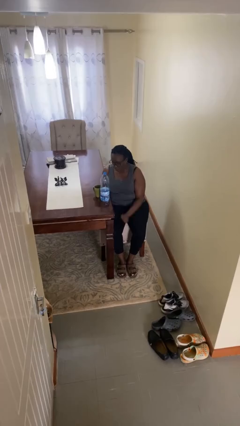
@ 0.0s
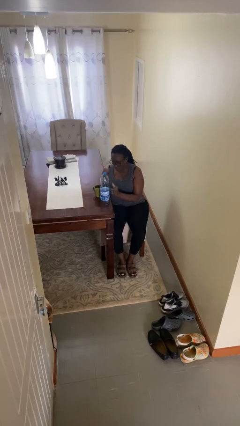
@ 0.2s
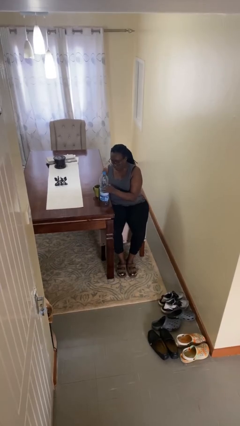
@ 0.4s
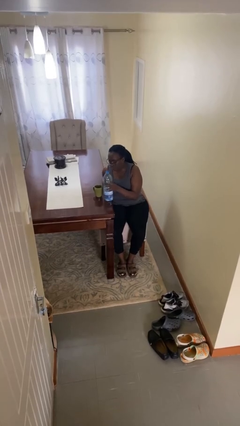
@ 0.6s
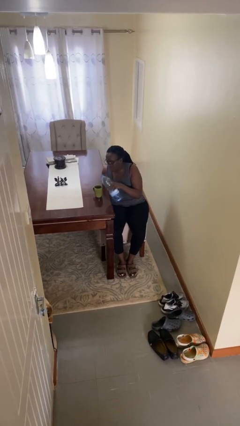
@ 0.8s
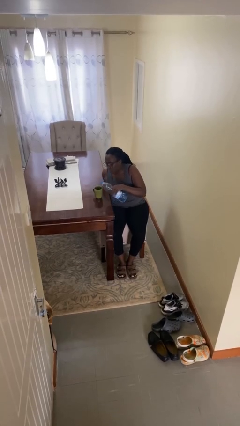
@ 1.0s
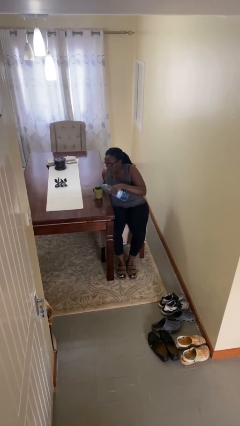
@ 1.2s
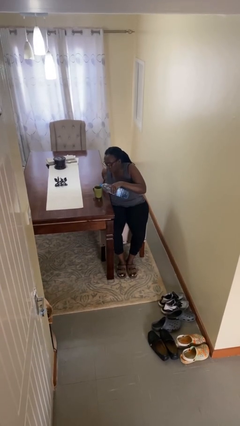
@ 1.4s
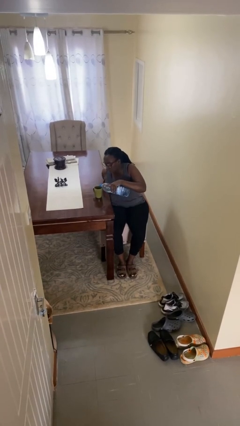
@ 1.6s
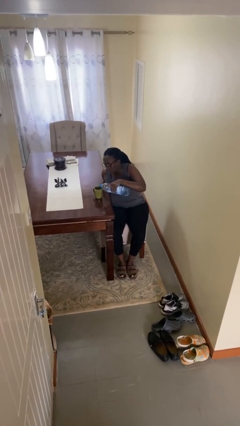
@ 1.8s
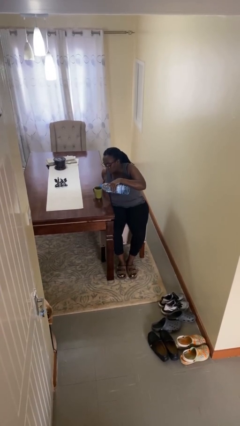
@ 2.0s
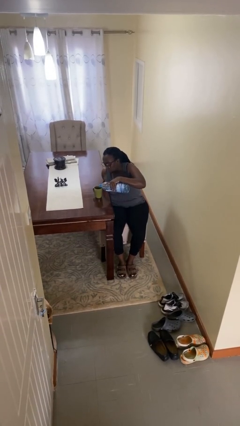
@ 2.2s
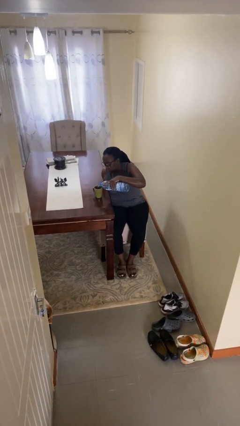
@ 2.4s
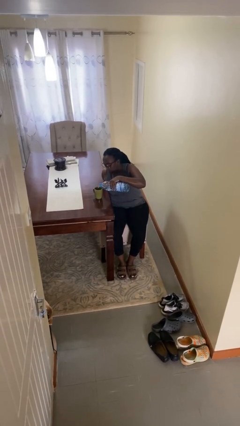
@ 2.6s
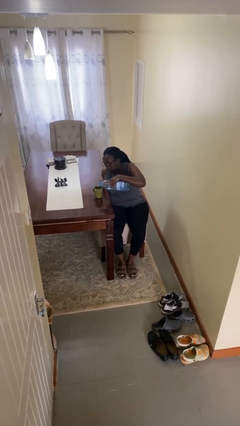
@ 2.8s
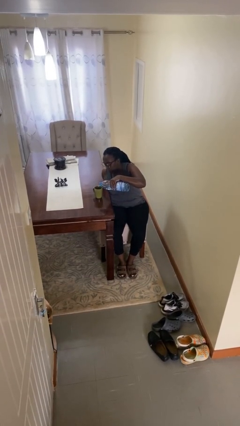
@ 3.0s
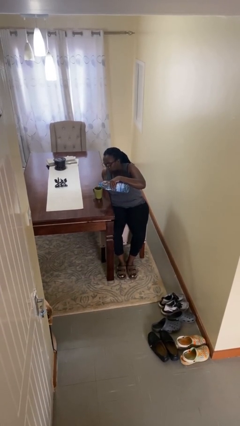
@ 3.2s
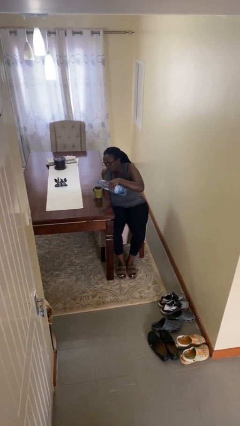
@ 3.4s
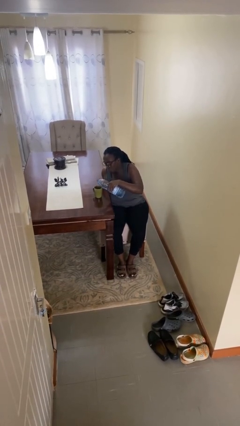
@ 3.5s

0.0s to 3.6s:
person pours liquid into cup

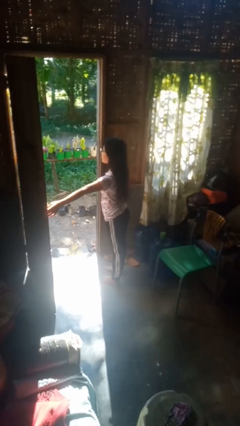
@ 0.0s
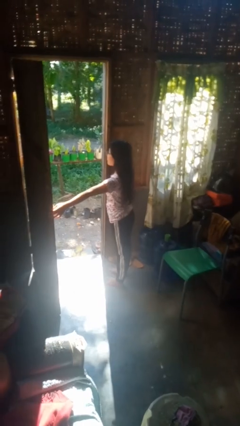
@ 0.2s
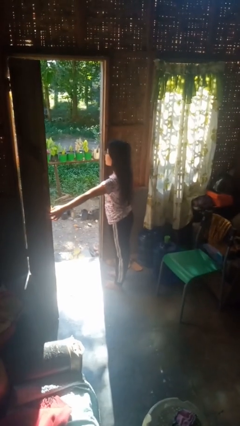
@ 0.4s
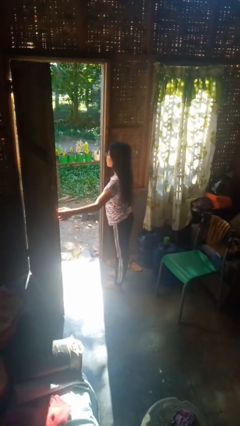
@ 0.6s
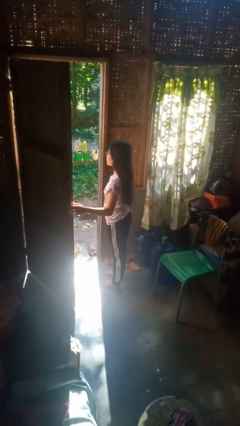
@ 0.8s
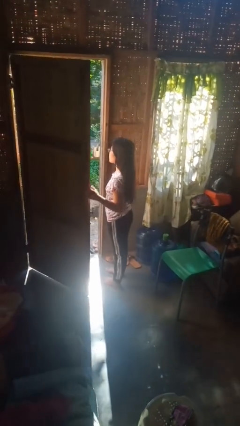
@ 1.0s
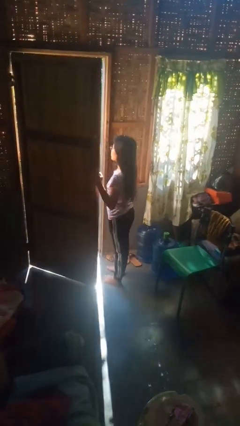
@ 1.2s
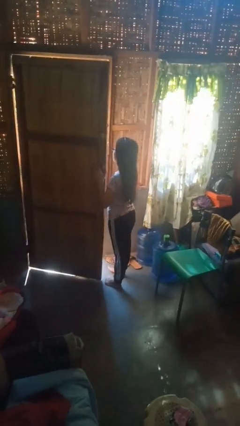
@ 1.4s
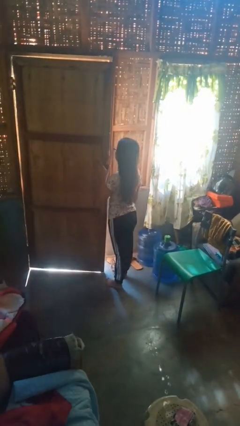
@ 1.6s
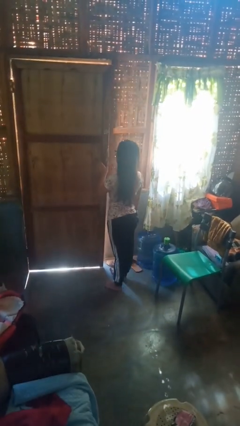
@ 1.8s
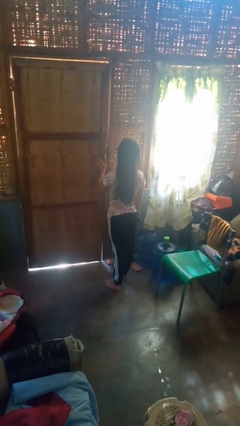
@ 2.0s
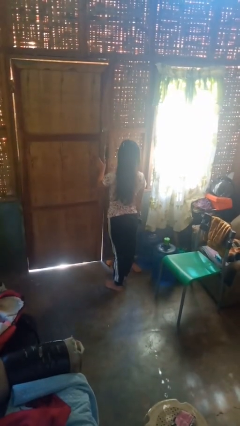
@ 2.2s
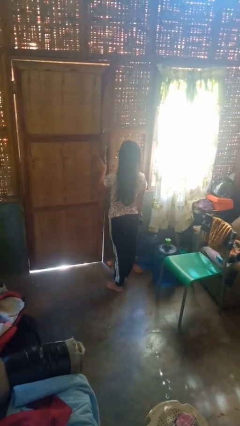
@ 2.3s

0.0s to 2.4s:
person closes facility door

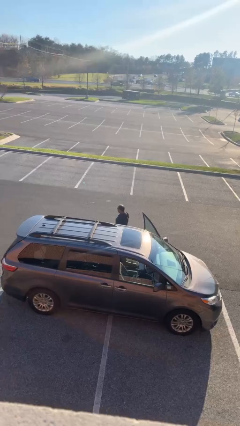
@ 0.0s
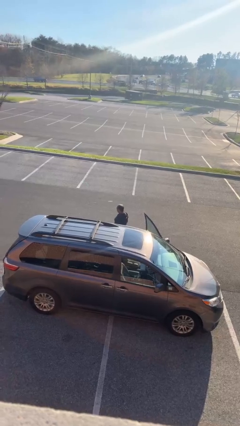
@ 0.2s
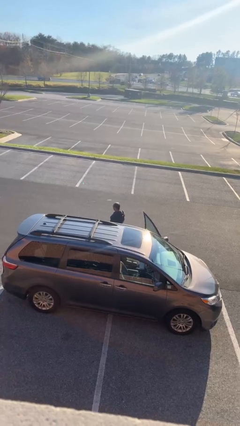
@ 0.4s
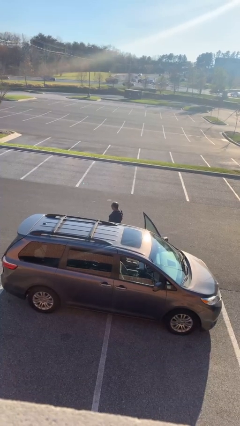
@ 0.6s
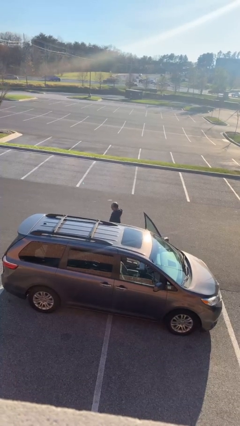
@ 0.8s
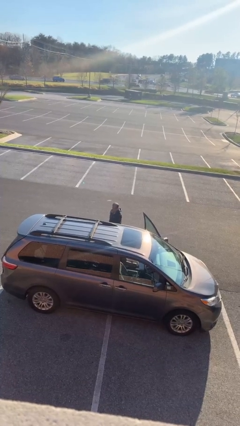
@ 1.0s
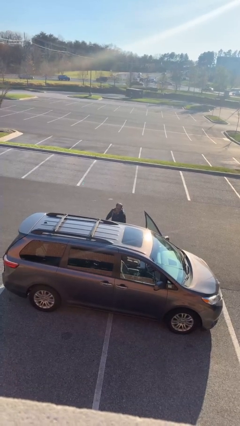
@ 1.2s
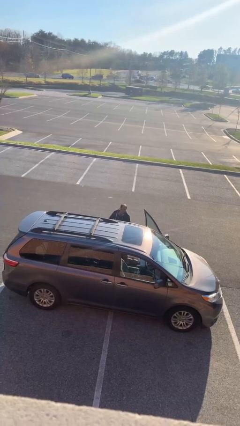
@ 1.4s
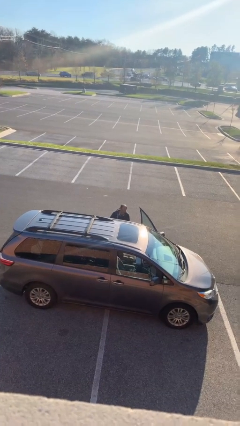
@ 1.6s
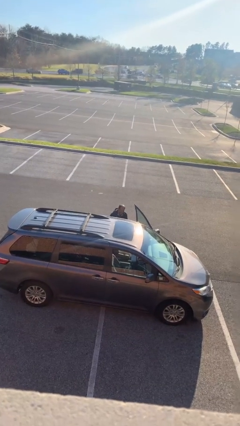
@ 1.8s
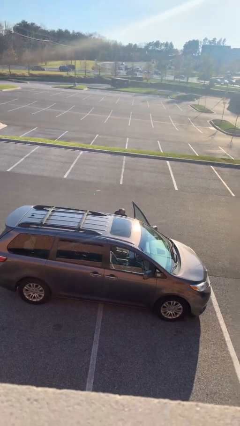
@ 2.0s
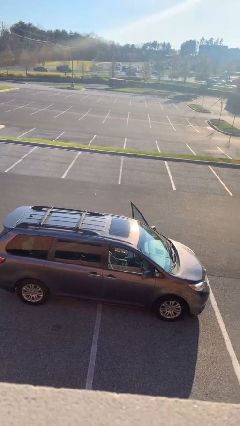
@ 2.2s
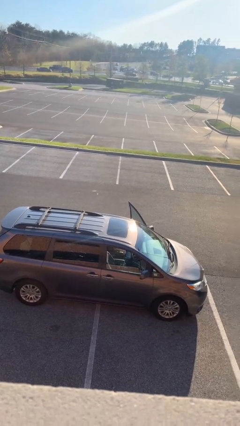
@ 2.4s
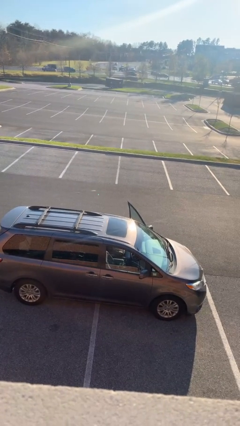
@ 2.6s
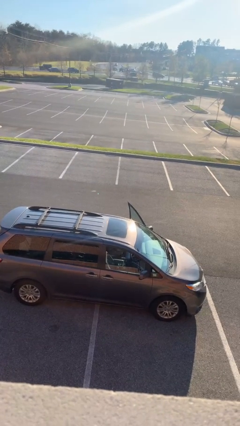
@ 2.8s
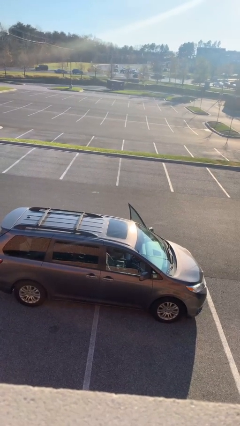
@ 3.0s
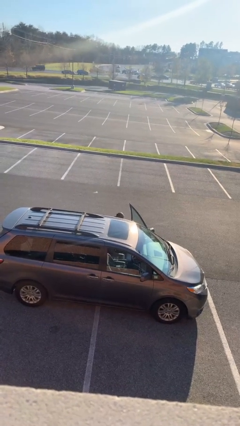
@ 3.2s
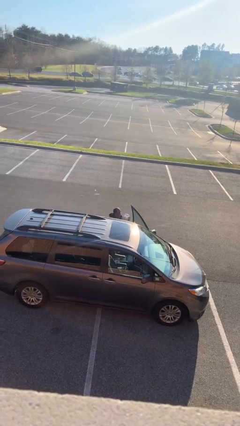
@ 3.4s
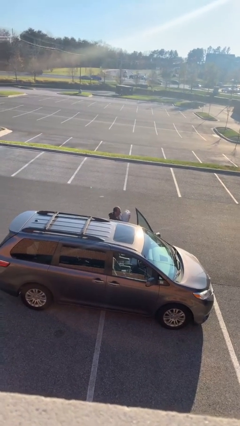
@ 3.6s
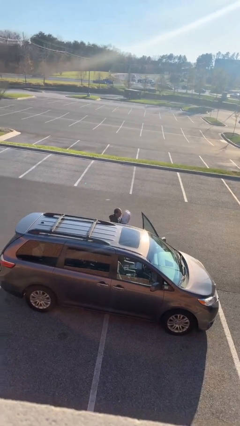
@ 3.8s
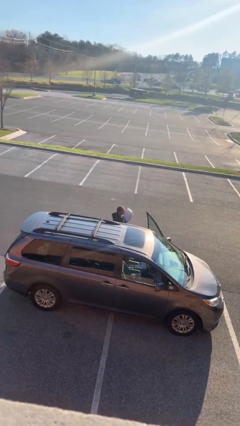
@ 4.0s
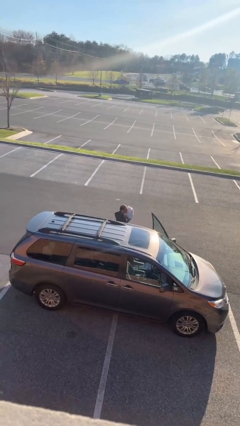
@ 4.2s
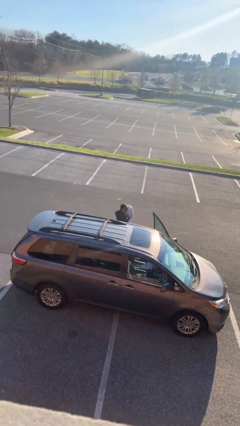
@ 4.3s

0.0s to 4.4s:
person unloads car

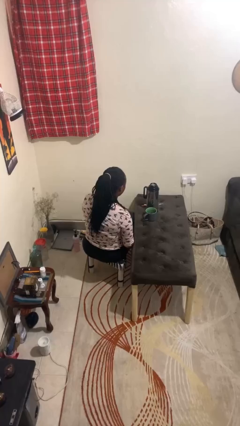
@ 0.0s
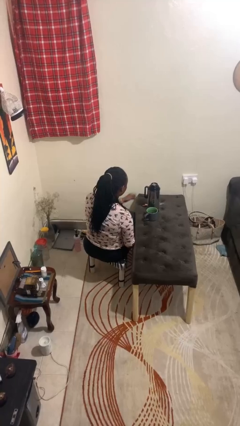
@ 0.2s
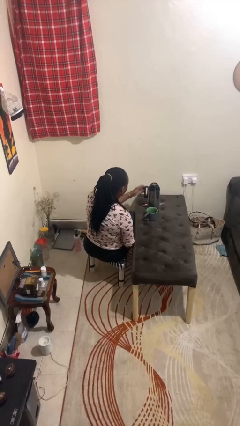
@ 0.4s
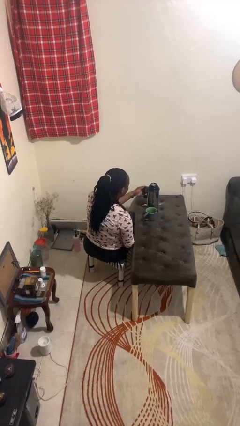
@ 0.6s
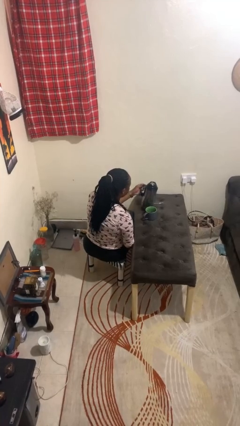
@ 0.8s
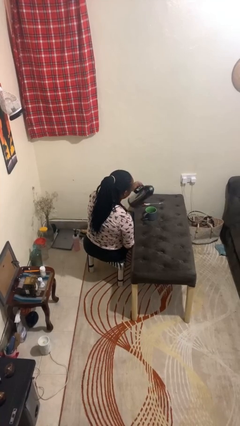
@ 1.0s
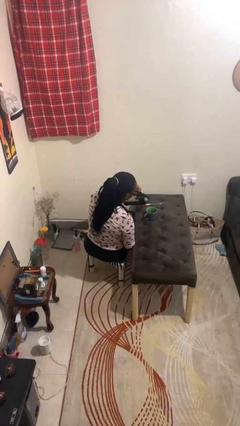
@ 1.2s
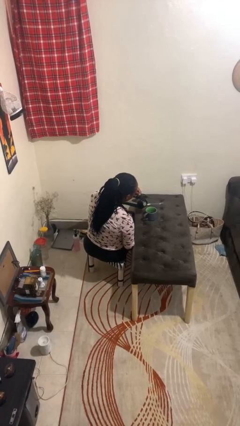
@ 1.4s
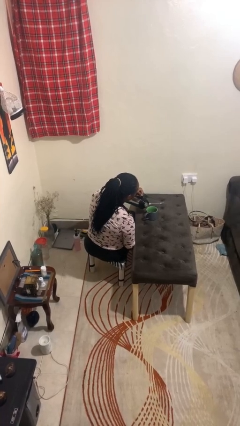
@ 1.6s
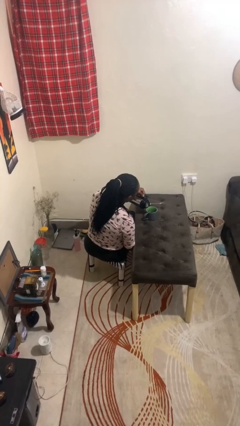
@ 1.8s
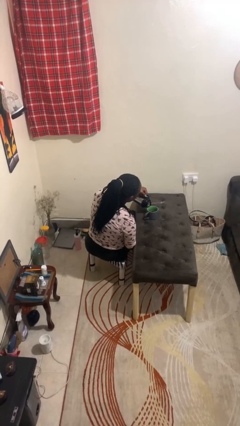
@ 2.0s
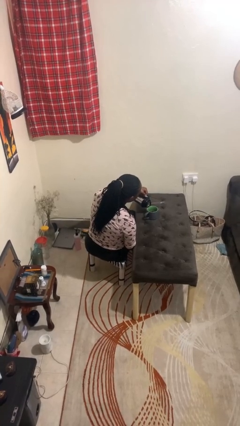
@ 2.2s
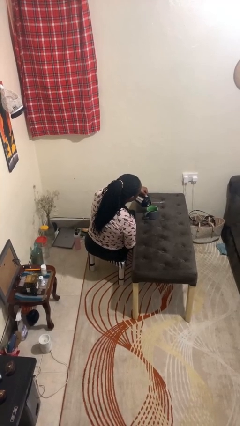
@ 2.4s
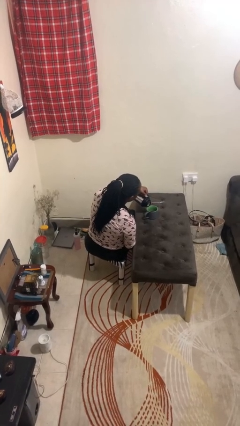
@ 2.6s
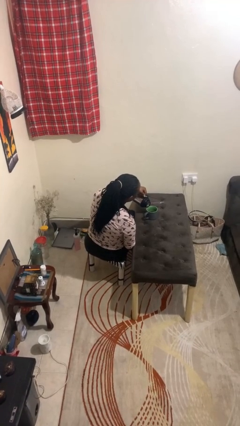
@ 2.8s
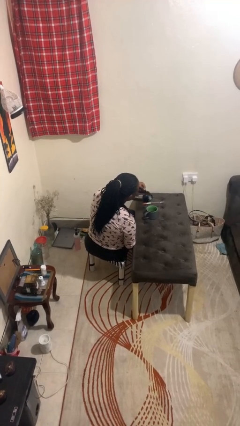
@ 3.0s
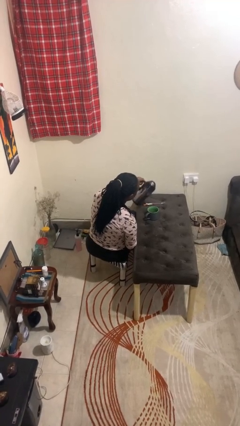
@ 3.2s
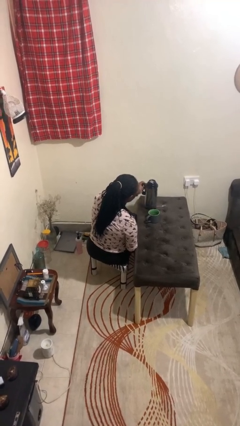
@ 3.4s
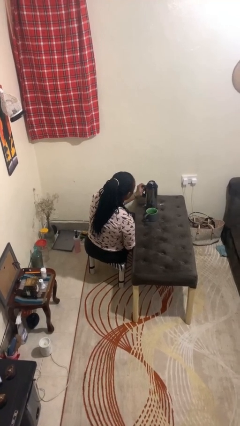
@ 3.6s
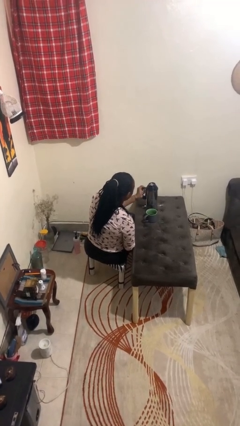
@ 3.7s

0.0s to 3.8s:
person pours coffee into mug

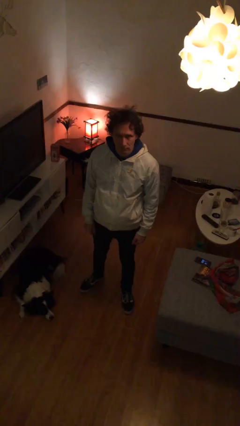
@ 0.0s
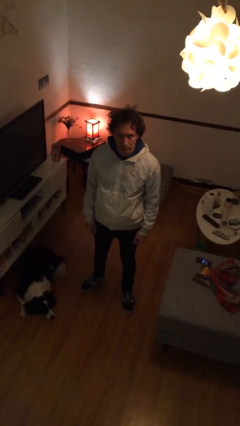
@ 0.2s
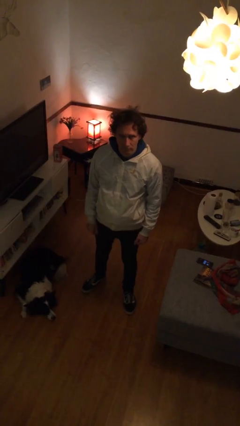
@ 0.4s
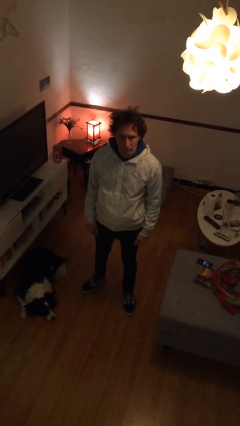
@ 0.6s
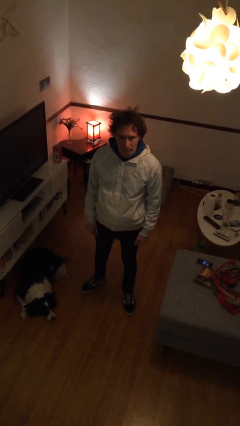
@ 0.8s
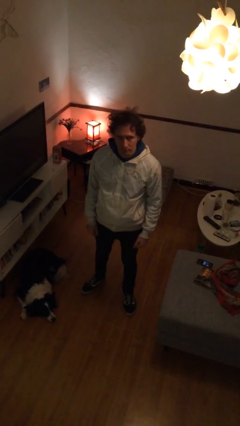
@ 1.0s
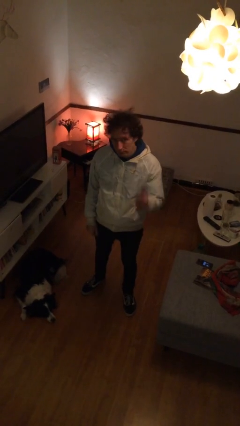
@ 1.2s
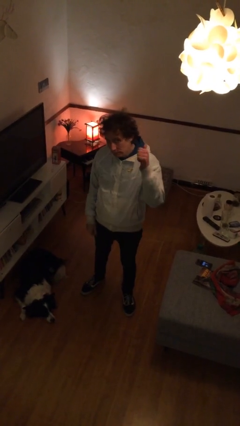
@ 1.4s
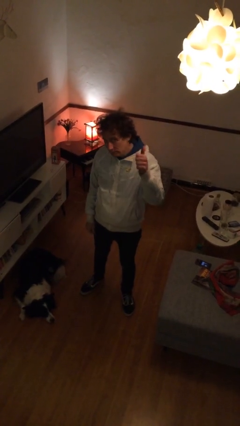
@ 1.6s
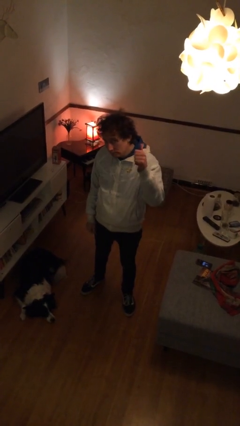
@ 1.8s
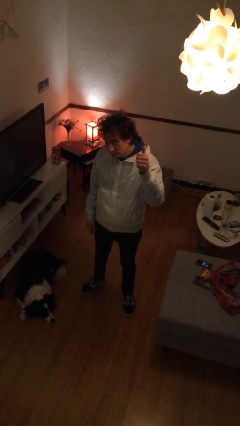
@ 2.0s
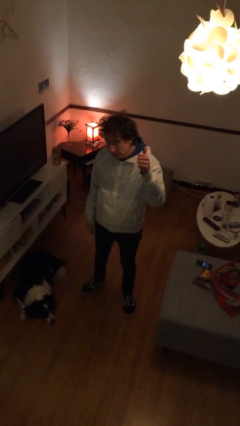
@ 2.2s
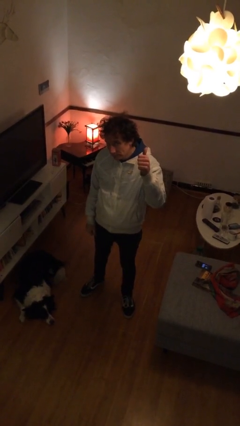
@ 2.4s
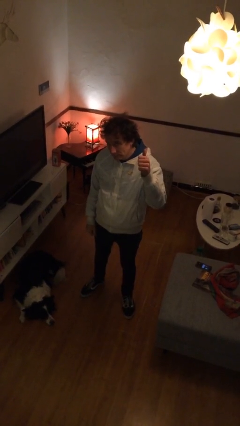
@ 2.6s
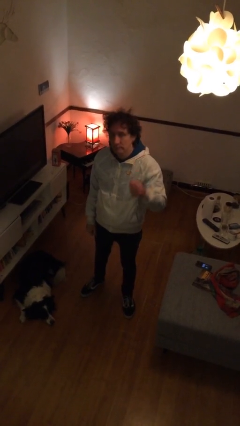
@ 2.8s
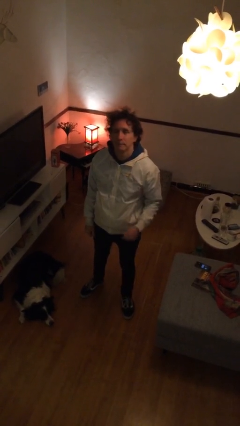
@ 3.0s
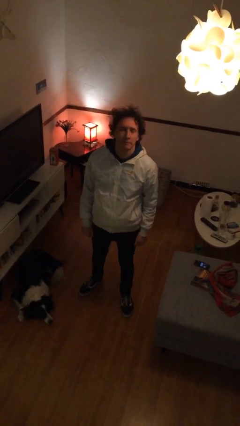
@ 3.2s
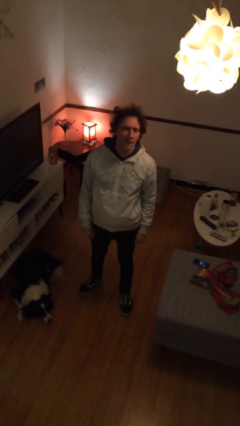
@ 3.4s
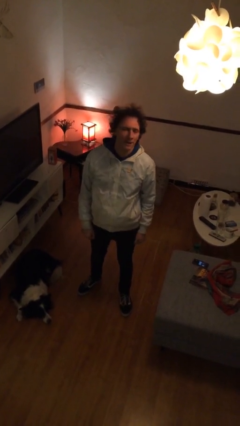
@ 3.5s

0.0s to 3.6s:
person gestures thumbs up
